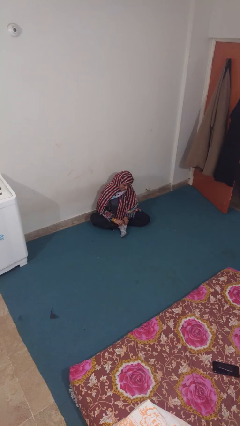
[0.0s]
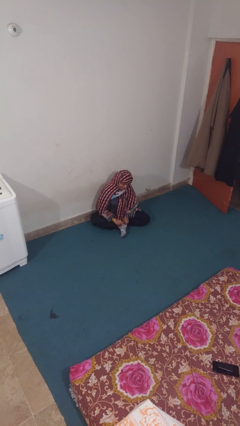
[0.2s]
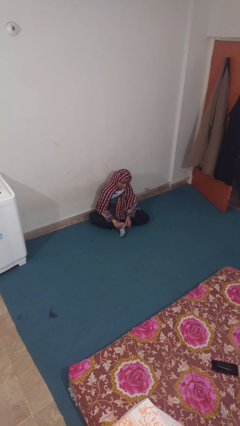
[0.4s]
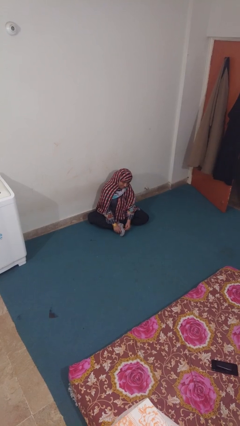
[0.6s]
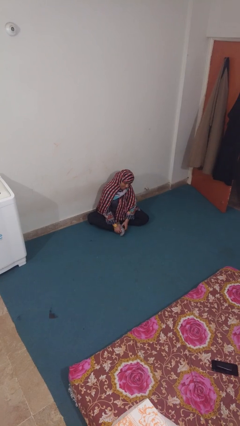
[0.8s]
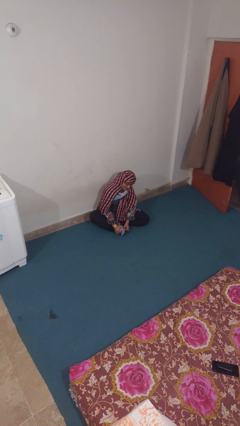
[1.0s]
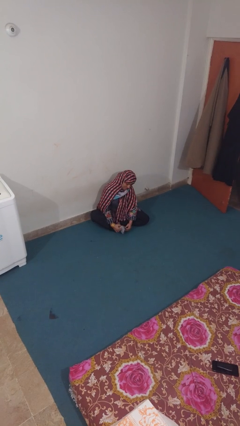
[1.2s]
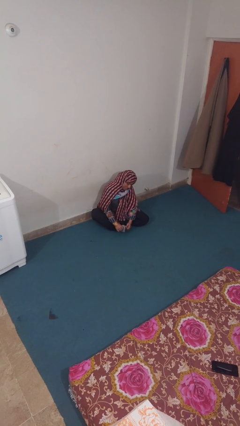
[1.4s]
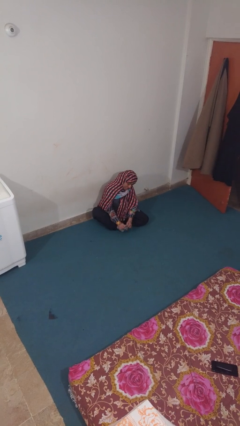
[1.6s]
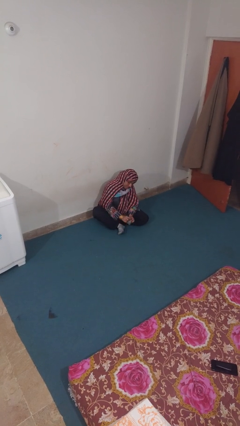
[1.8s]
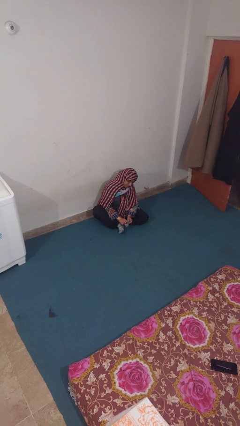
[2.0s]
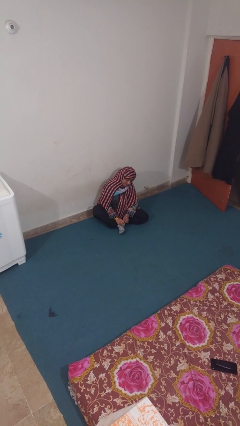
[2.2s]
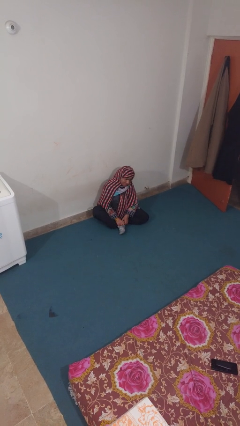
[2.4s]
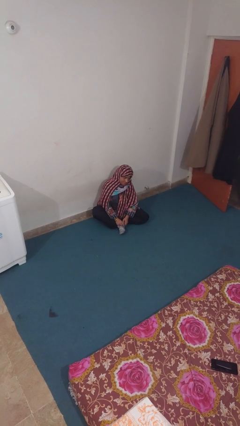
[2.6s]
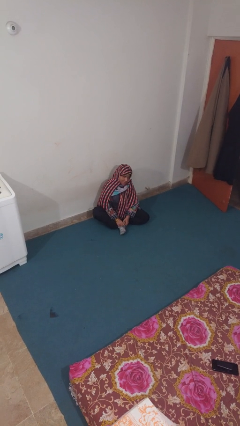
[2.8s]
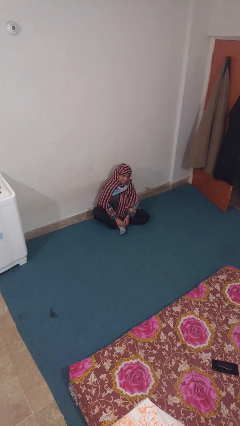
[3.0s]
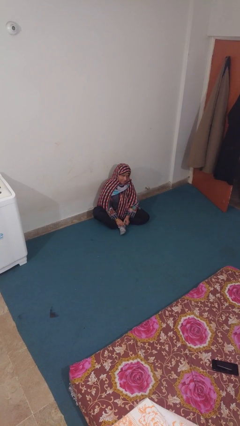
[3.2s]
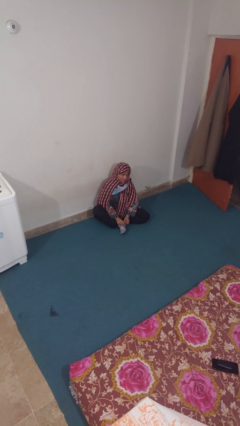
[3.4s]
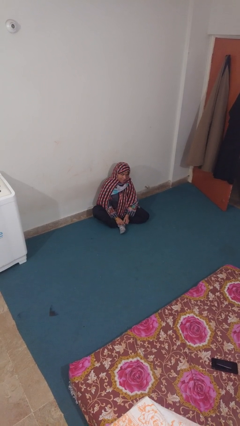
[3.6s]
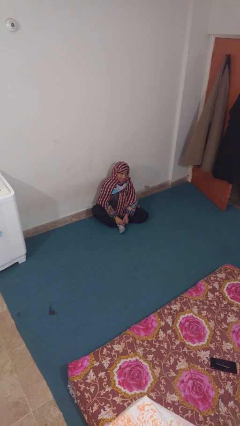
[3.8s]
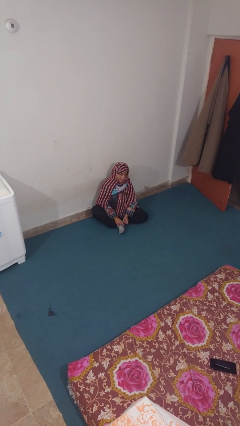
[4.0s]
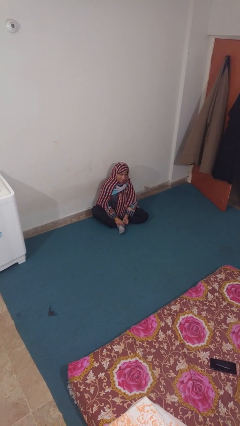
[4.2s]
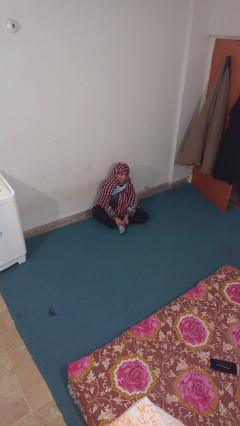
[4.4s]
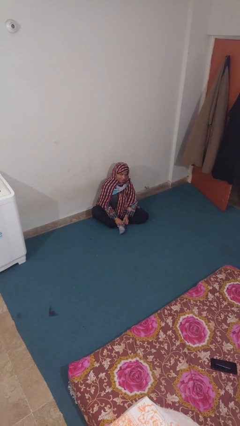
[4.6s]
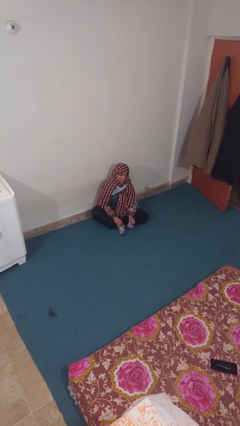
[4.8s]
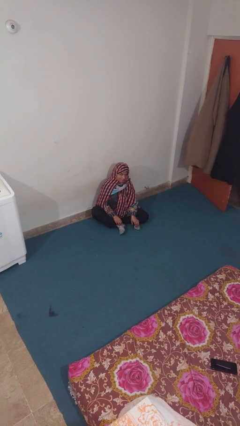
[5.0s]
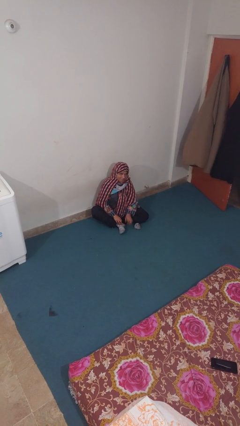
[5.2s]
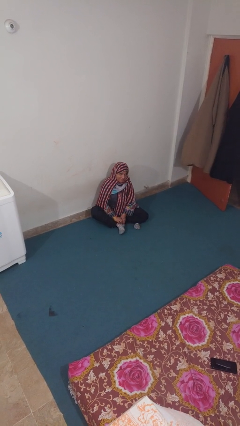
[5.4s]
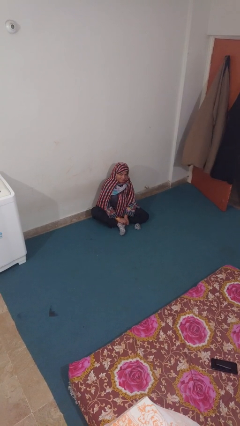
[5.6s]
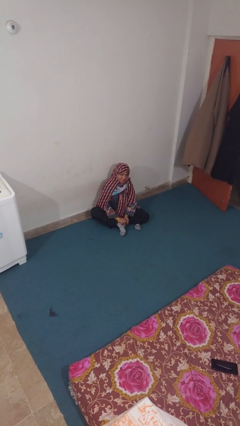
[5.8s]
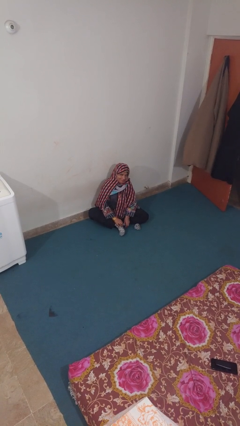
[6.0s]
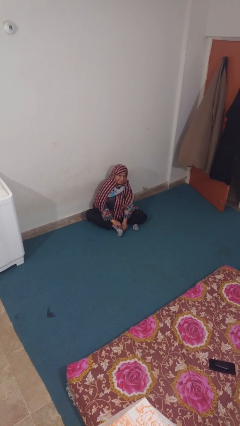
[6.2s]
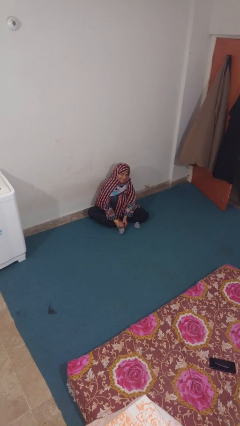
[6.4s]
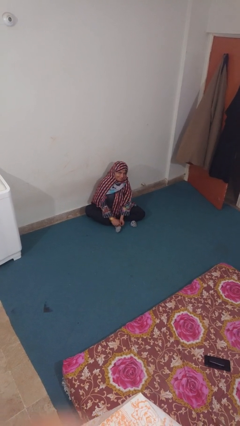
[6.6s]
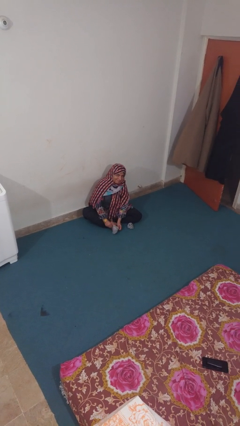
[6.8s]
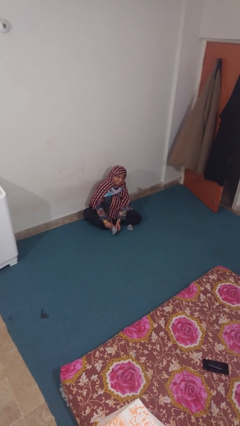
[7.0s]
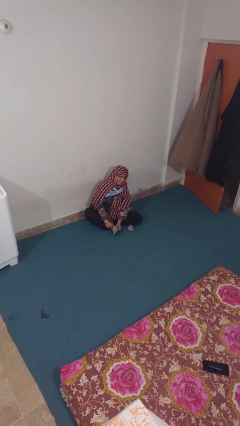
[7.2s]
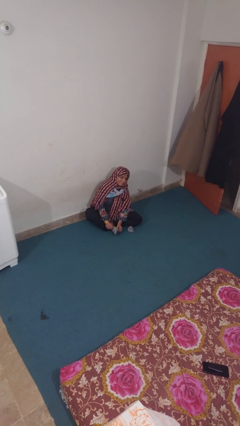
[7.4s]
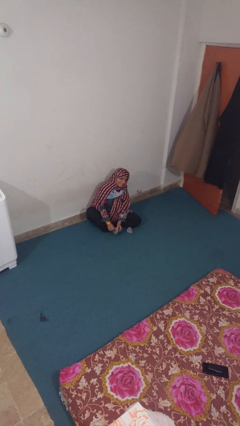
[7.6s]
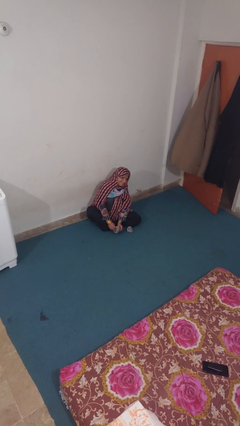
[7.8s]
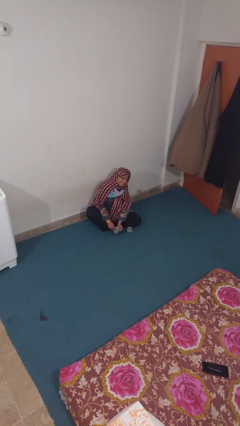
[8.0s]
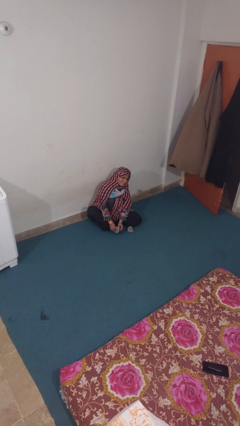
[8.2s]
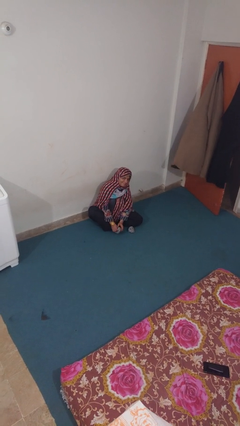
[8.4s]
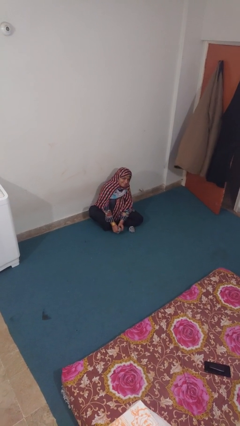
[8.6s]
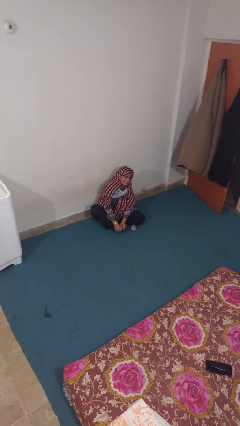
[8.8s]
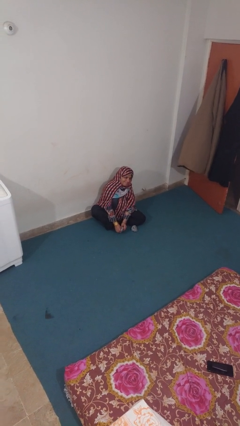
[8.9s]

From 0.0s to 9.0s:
person takes off socks

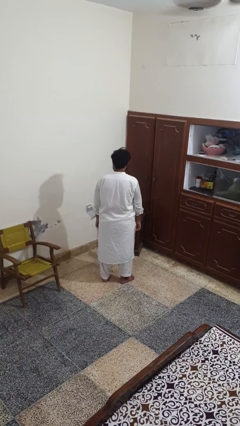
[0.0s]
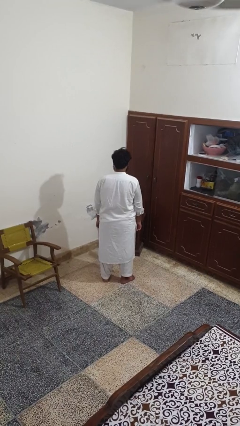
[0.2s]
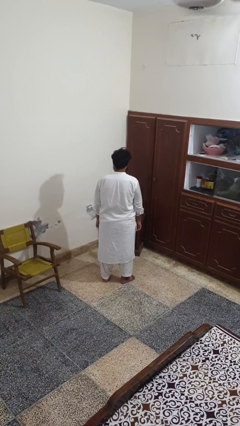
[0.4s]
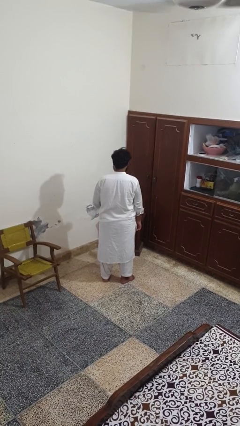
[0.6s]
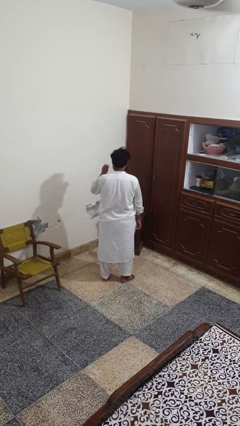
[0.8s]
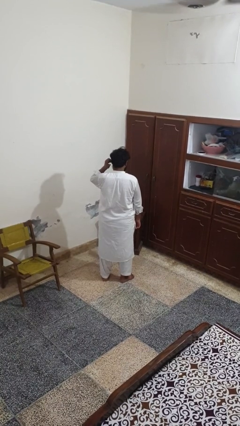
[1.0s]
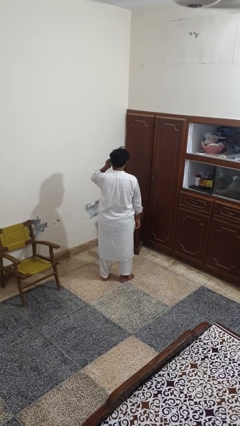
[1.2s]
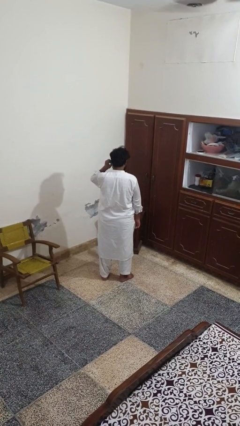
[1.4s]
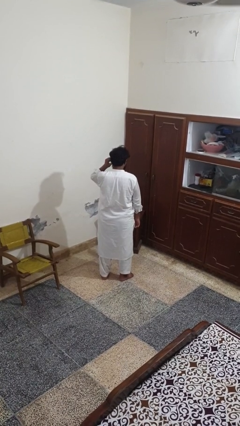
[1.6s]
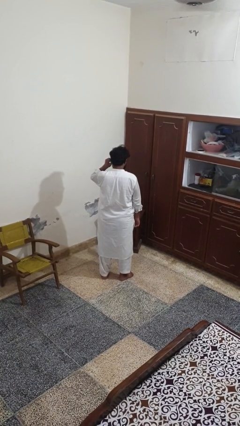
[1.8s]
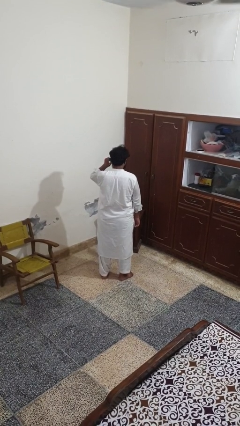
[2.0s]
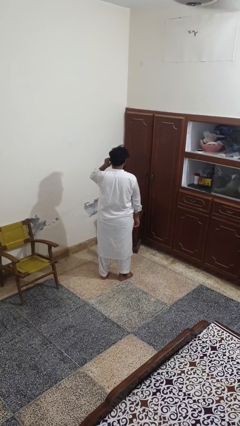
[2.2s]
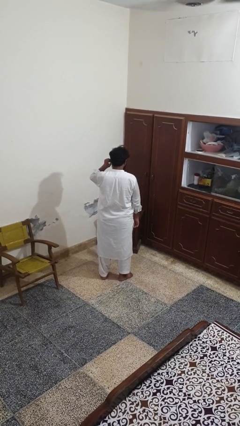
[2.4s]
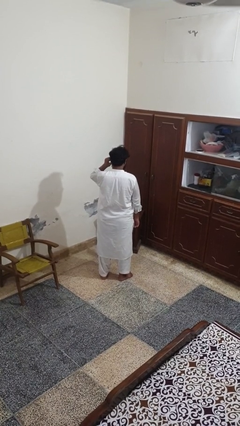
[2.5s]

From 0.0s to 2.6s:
person touches earlobe

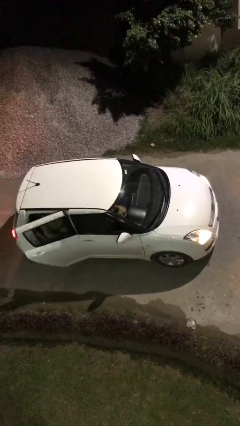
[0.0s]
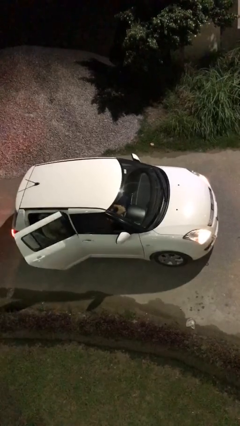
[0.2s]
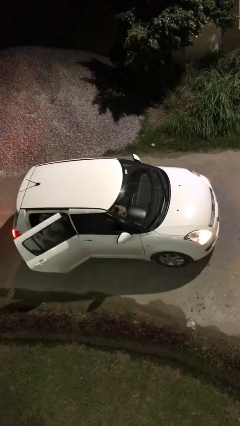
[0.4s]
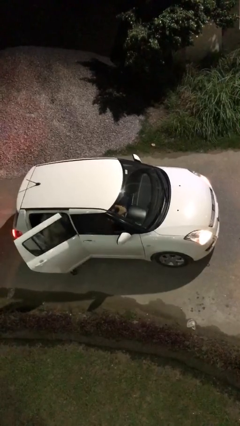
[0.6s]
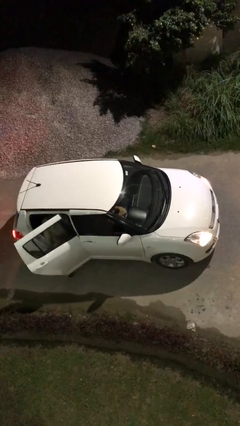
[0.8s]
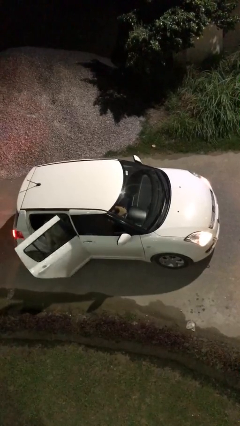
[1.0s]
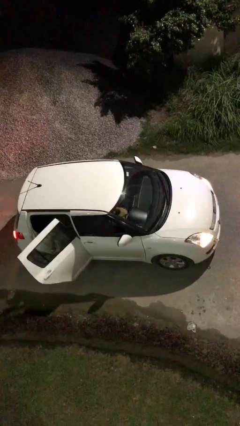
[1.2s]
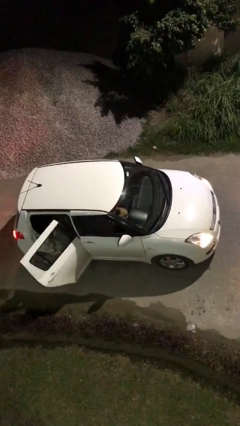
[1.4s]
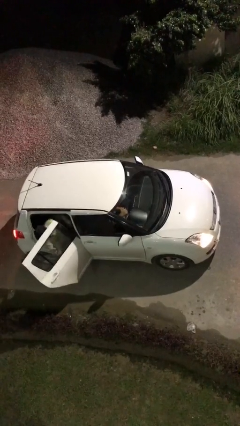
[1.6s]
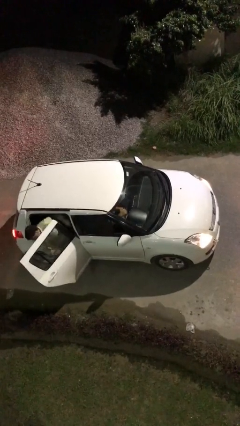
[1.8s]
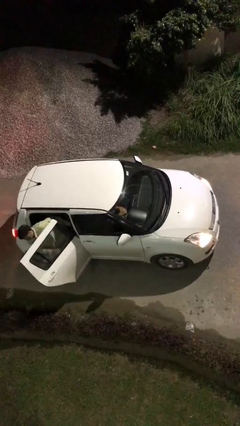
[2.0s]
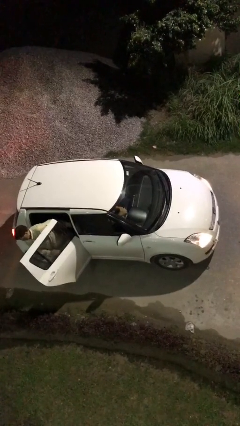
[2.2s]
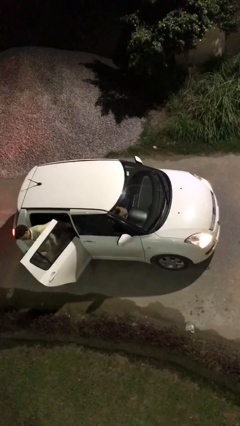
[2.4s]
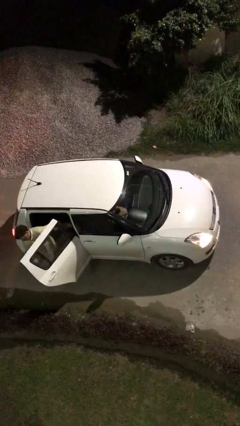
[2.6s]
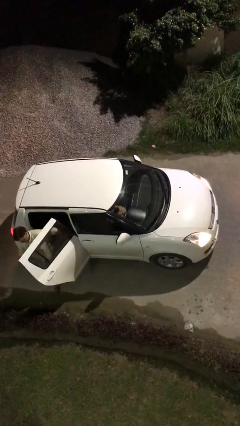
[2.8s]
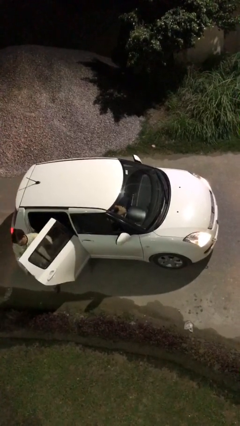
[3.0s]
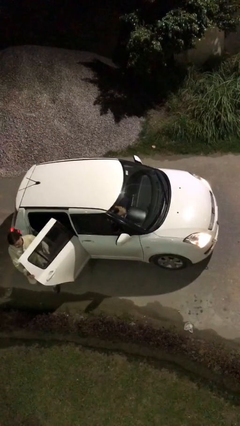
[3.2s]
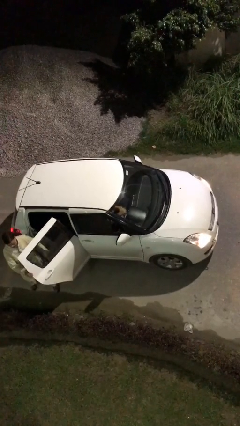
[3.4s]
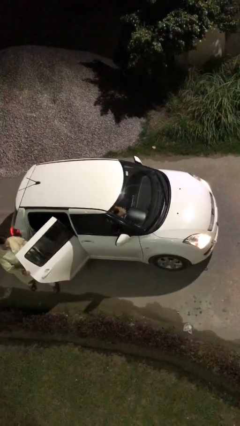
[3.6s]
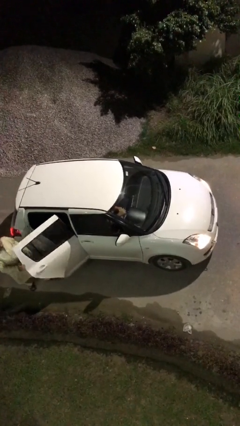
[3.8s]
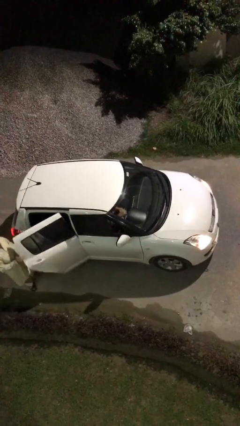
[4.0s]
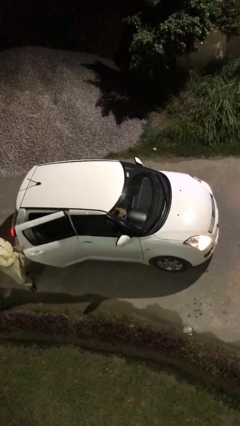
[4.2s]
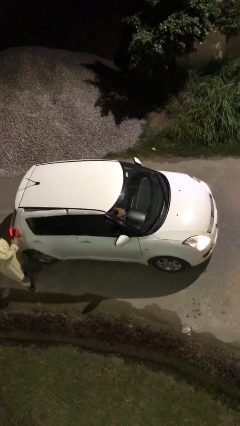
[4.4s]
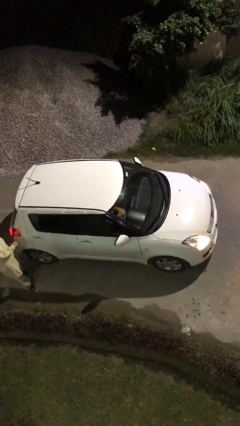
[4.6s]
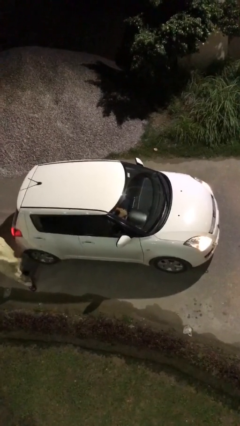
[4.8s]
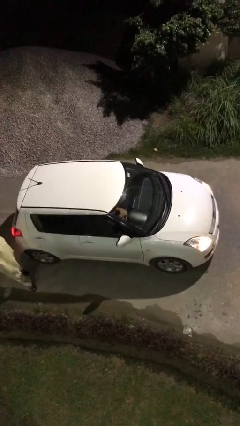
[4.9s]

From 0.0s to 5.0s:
car drops off person

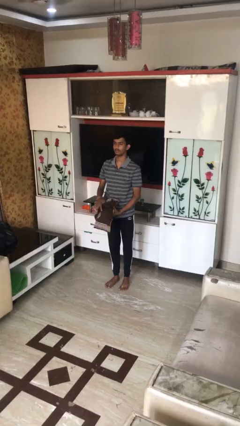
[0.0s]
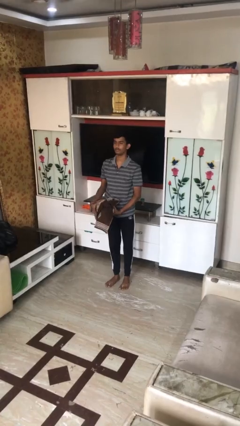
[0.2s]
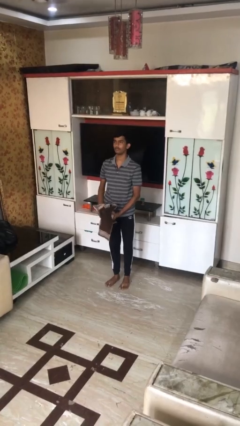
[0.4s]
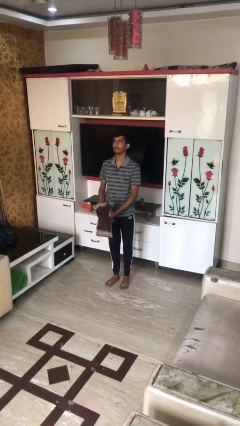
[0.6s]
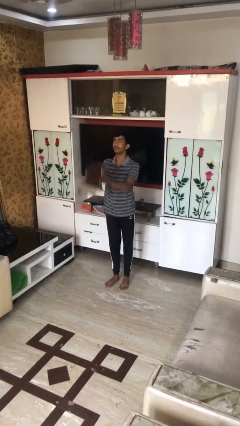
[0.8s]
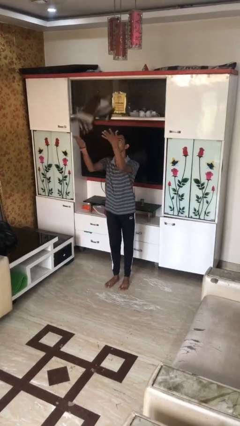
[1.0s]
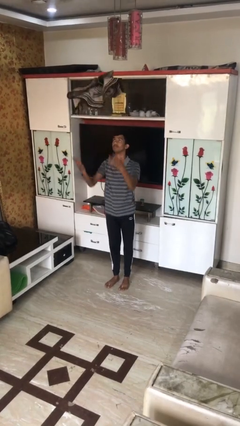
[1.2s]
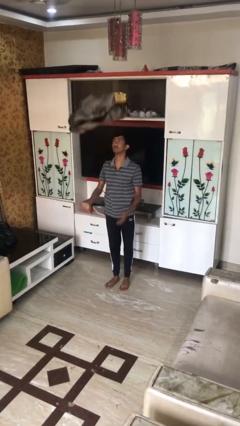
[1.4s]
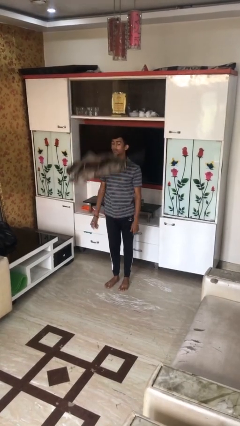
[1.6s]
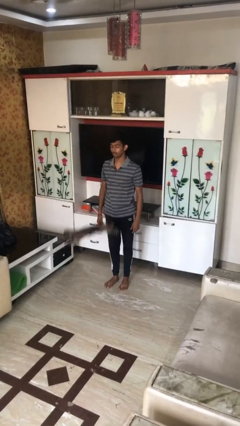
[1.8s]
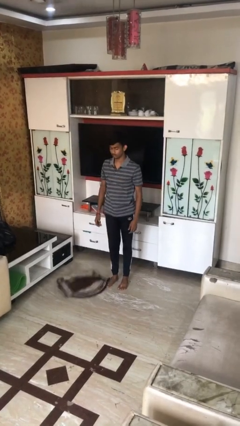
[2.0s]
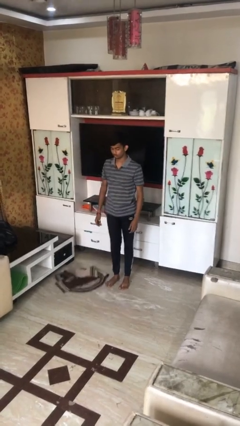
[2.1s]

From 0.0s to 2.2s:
person throws object into air
